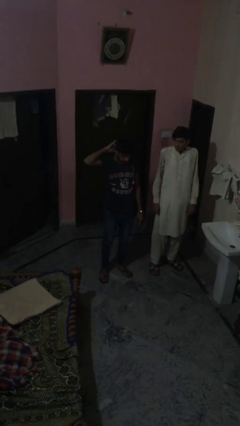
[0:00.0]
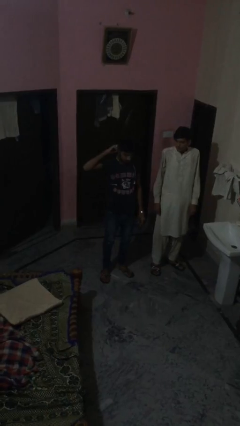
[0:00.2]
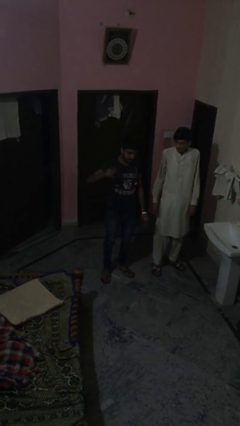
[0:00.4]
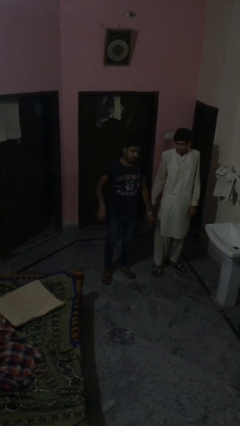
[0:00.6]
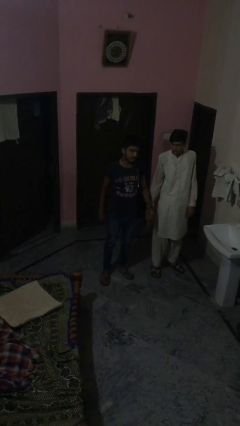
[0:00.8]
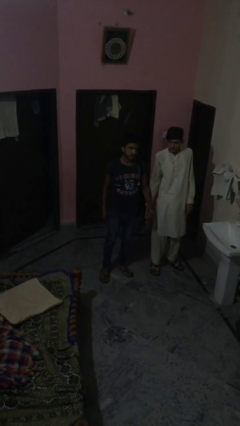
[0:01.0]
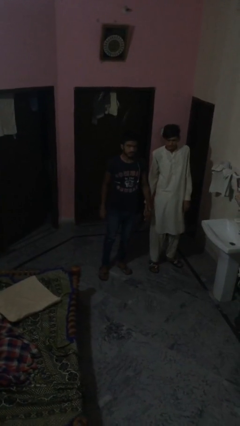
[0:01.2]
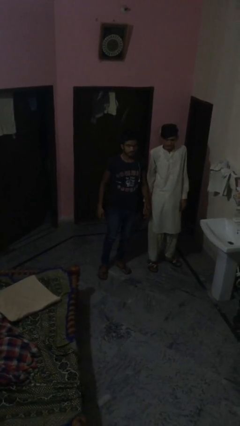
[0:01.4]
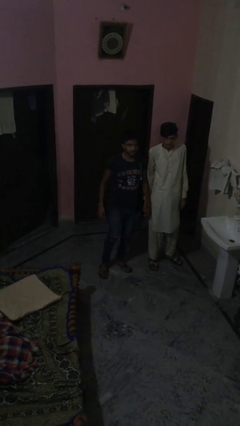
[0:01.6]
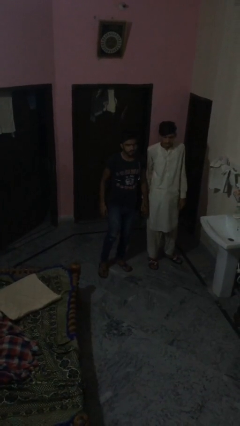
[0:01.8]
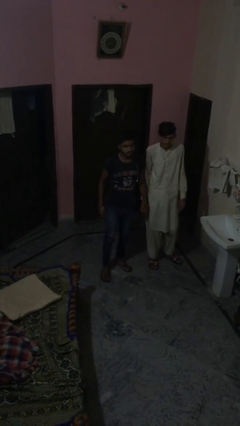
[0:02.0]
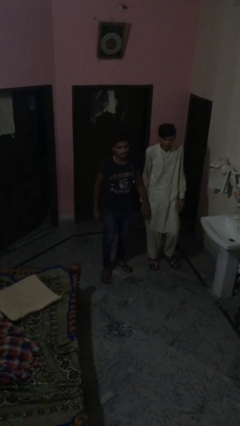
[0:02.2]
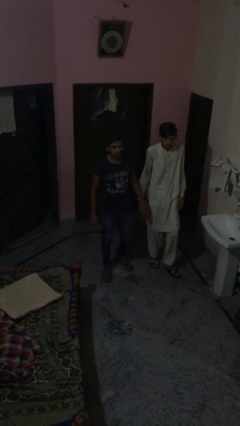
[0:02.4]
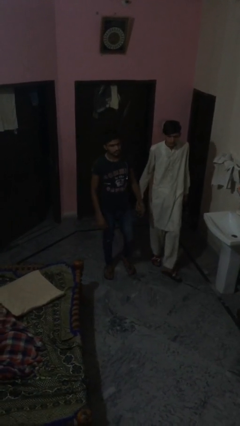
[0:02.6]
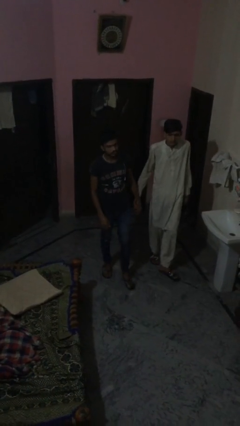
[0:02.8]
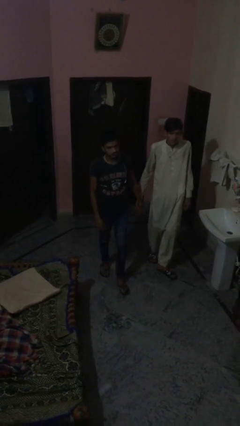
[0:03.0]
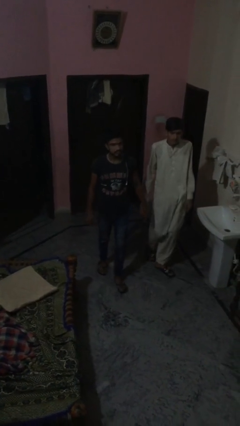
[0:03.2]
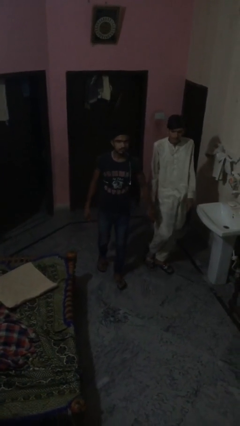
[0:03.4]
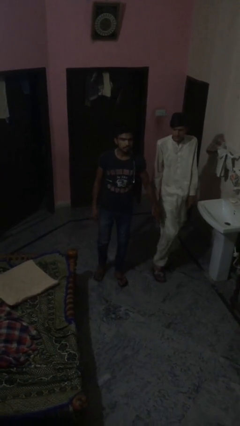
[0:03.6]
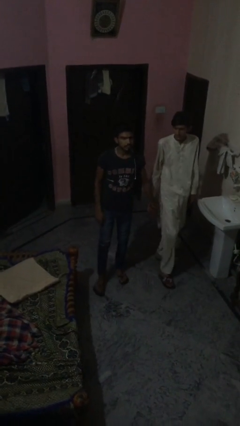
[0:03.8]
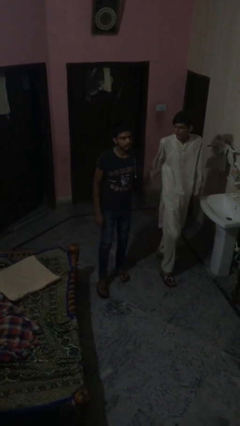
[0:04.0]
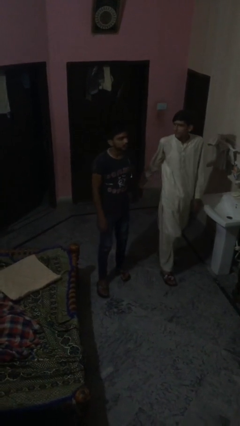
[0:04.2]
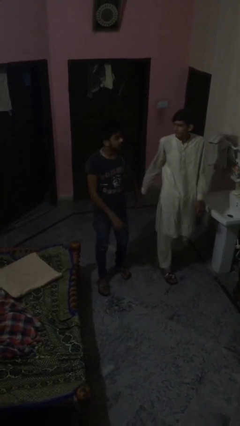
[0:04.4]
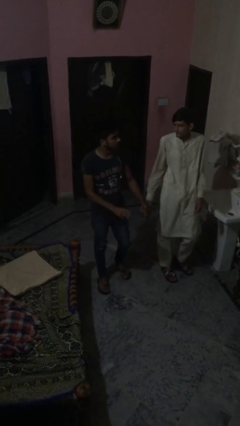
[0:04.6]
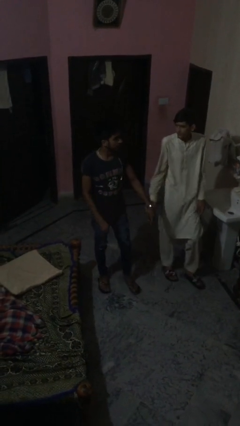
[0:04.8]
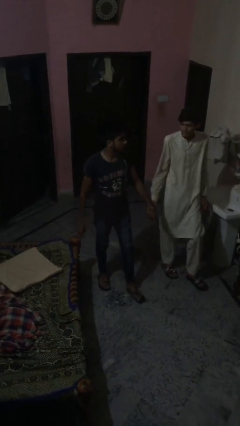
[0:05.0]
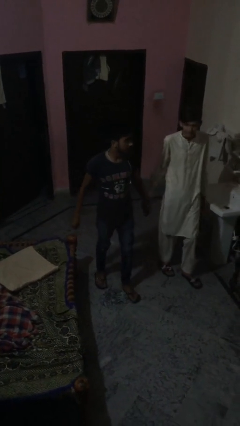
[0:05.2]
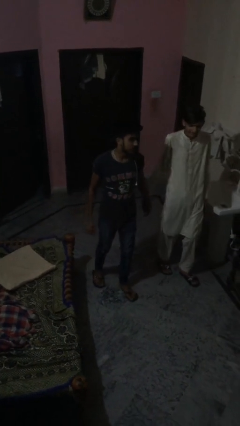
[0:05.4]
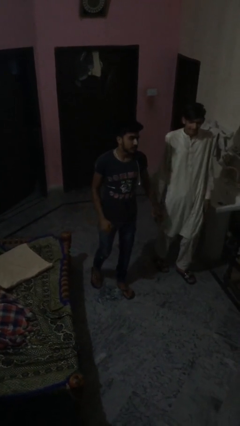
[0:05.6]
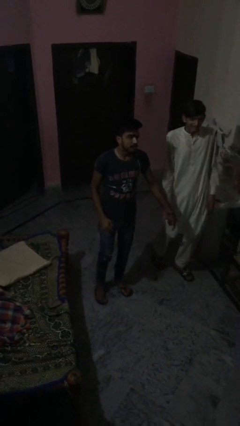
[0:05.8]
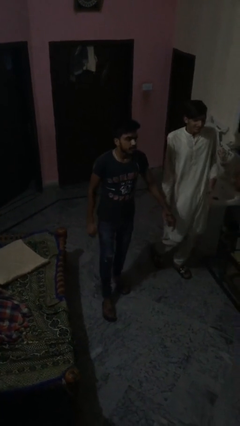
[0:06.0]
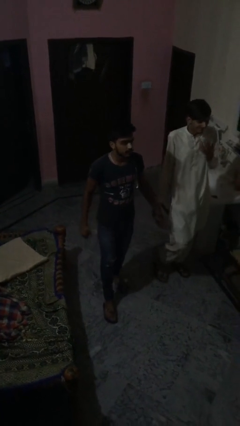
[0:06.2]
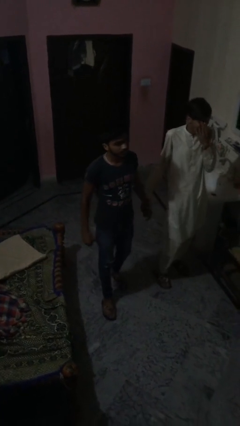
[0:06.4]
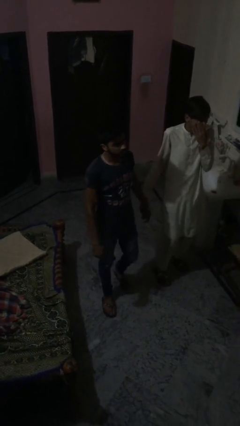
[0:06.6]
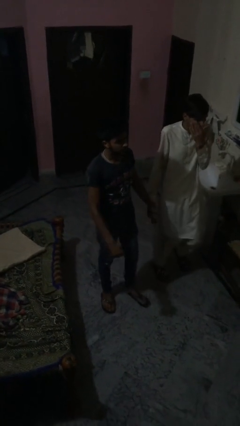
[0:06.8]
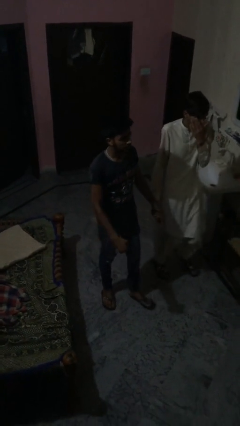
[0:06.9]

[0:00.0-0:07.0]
person holds hand

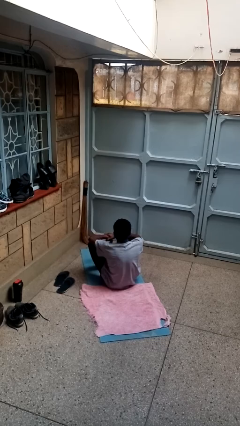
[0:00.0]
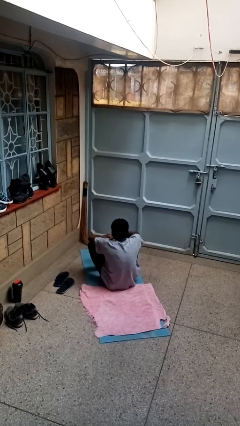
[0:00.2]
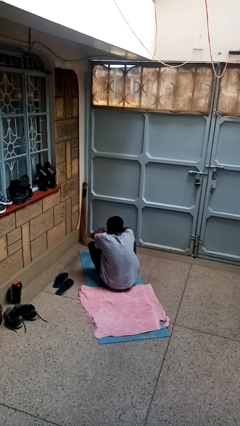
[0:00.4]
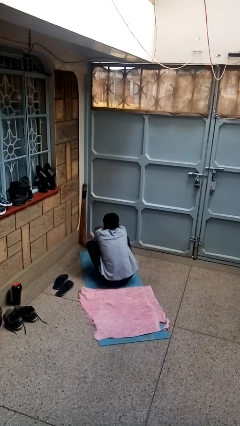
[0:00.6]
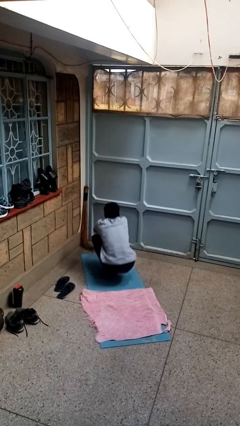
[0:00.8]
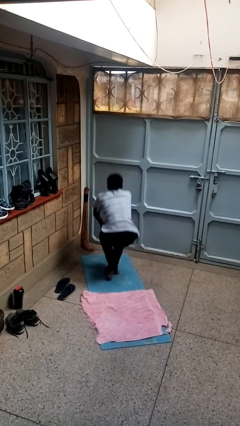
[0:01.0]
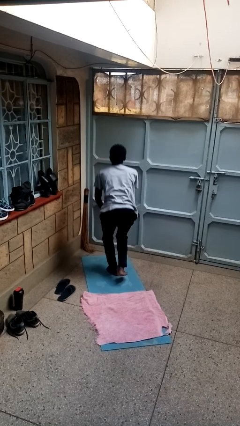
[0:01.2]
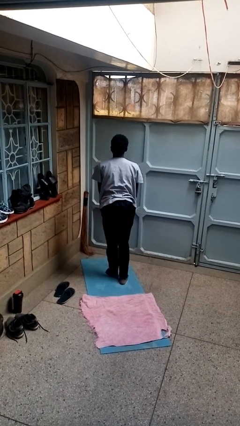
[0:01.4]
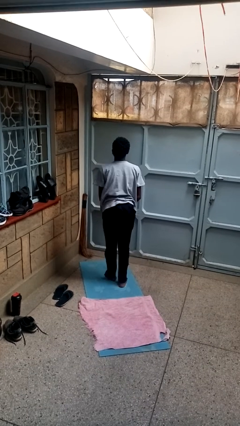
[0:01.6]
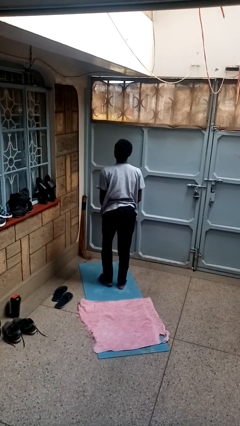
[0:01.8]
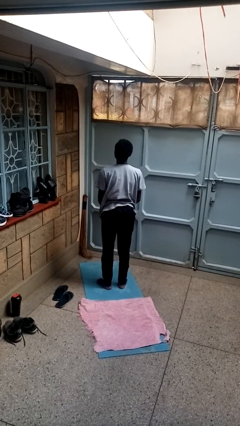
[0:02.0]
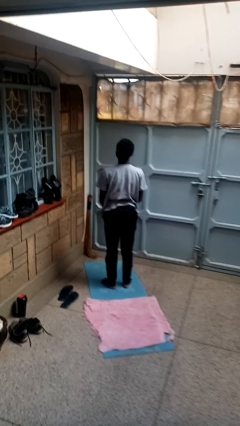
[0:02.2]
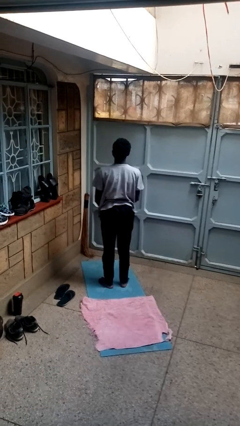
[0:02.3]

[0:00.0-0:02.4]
person stands up from floor

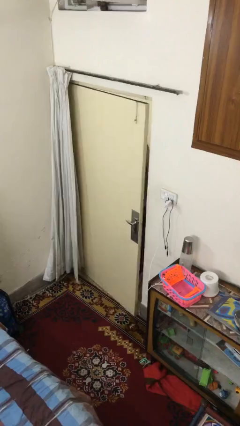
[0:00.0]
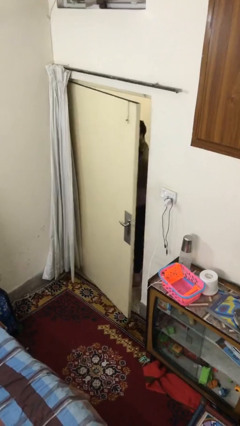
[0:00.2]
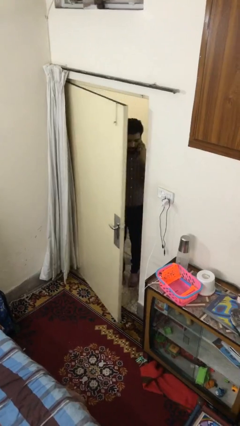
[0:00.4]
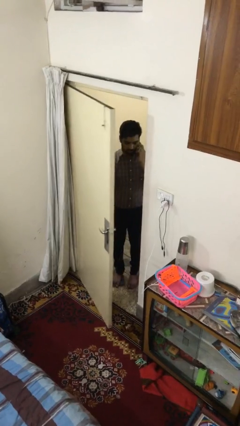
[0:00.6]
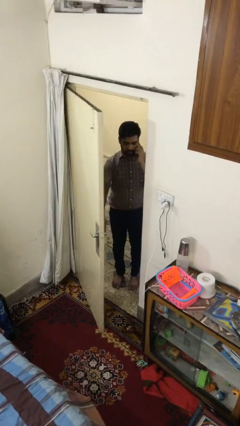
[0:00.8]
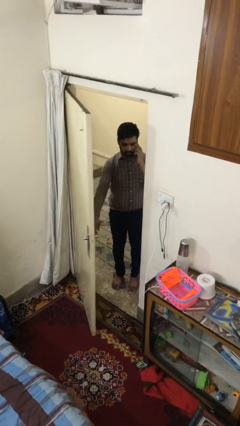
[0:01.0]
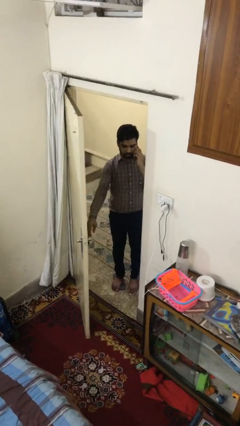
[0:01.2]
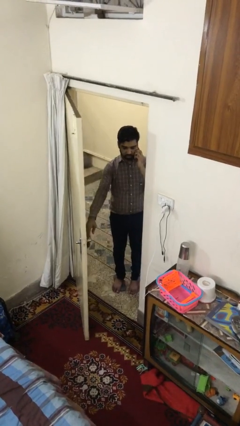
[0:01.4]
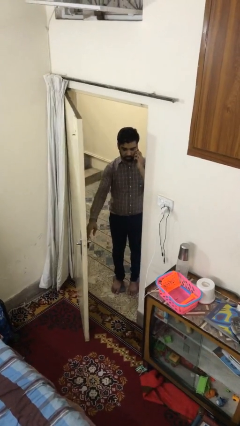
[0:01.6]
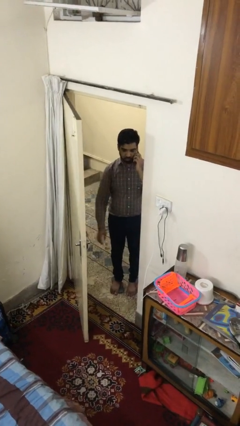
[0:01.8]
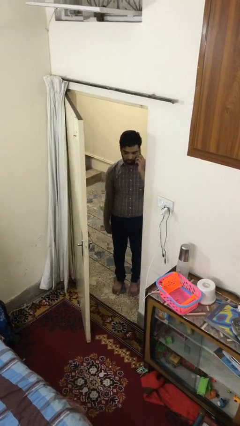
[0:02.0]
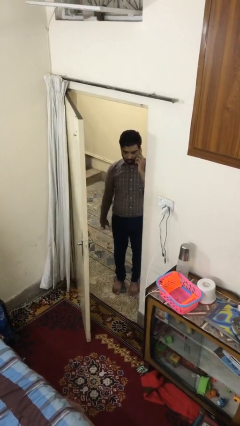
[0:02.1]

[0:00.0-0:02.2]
person opens facility door

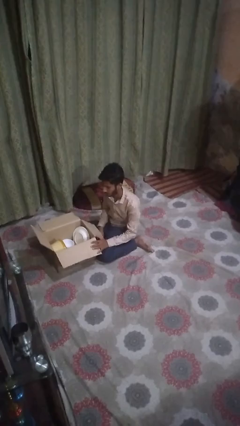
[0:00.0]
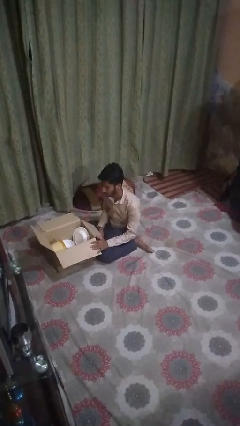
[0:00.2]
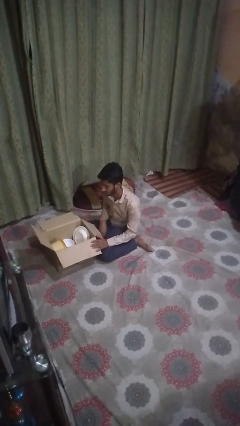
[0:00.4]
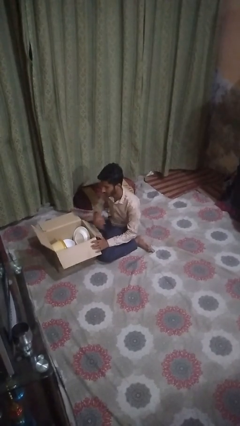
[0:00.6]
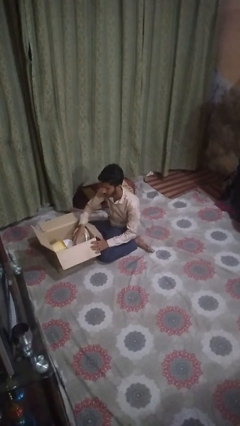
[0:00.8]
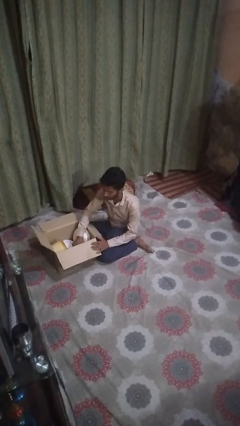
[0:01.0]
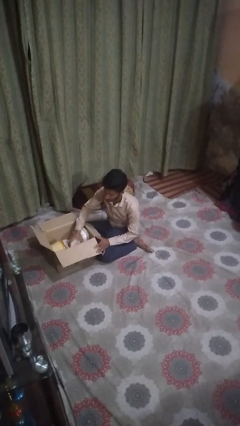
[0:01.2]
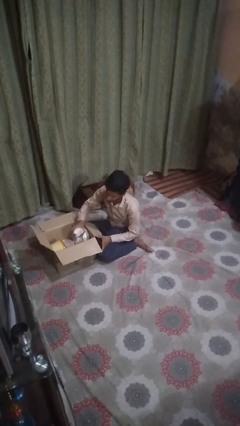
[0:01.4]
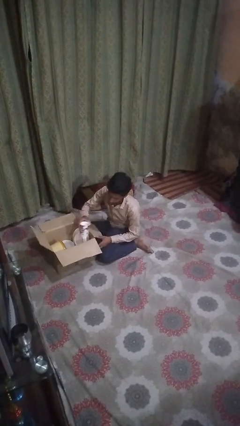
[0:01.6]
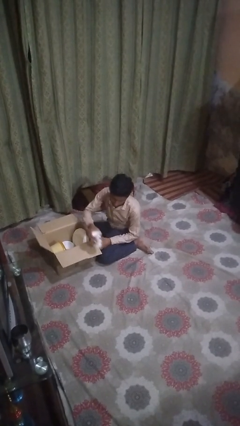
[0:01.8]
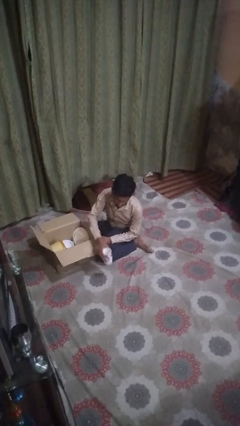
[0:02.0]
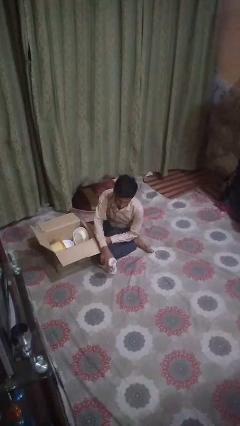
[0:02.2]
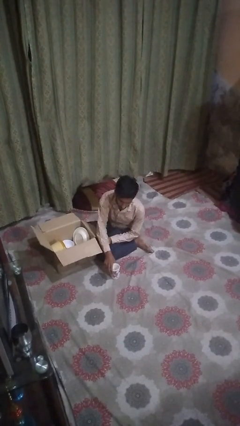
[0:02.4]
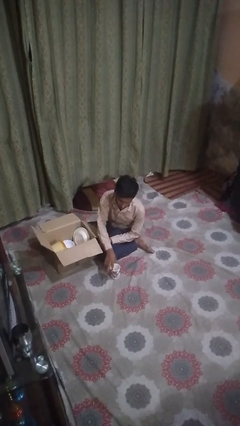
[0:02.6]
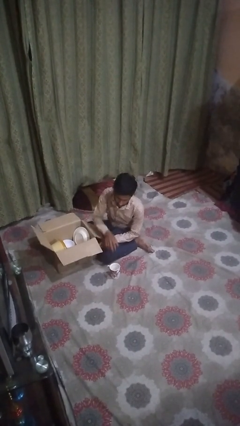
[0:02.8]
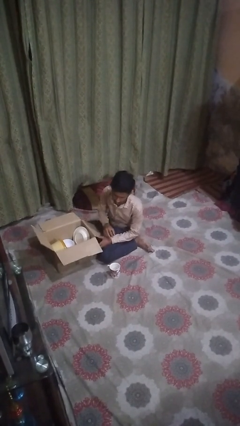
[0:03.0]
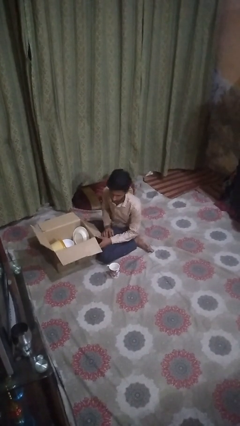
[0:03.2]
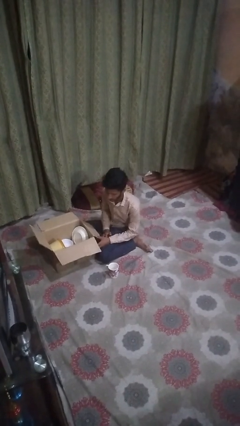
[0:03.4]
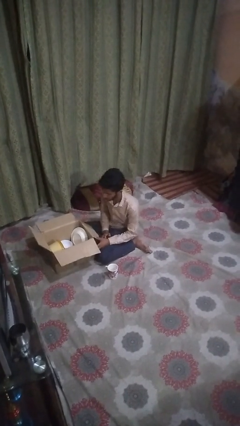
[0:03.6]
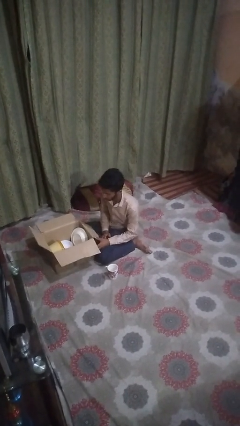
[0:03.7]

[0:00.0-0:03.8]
person takes object from box

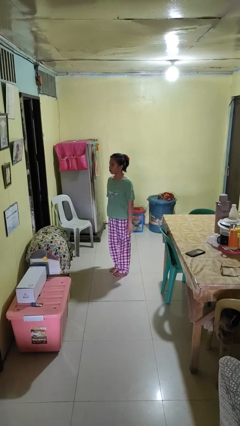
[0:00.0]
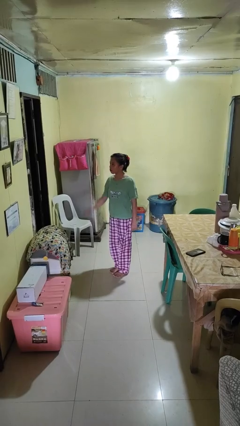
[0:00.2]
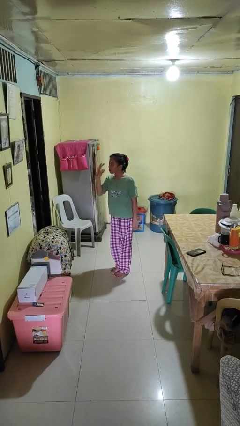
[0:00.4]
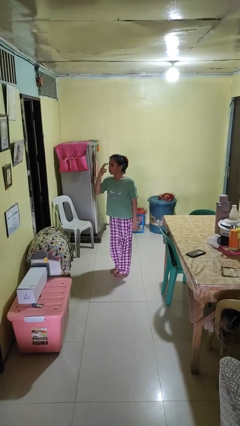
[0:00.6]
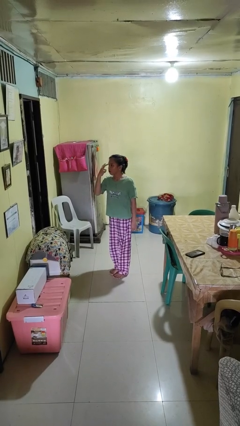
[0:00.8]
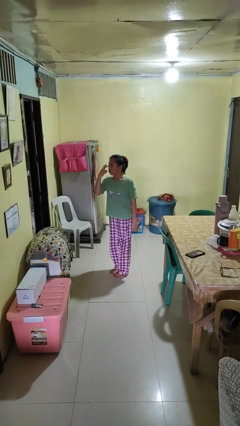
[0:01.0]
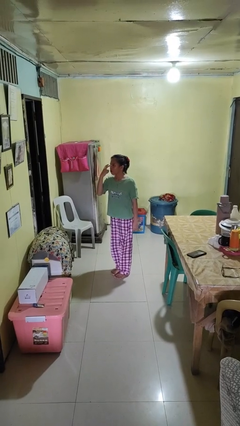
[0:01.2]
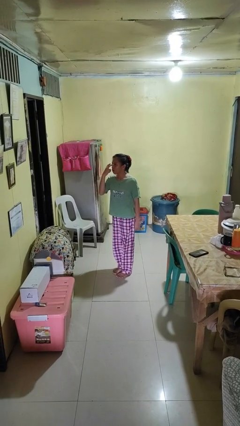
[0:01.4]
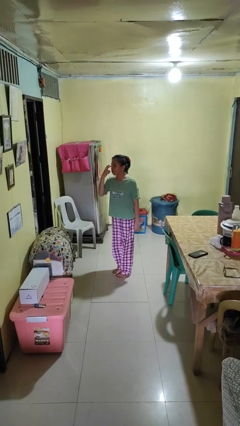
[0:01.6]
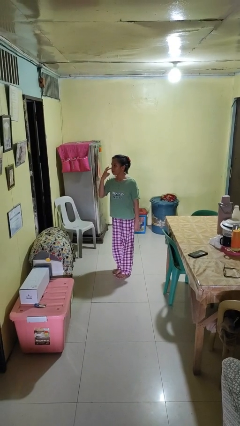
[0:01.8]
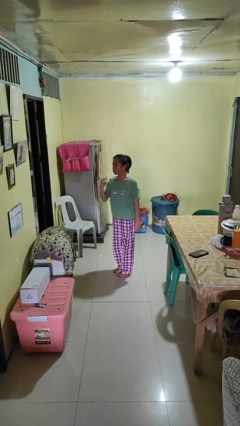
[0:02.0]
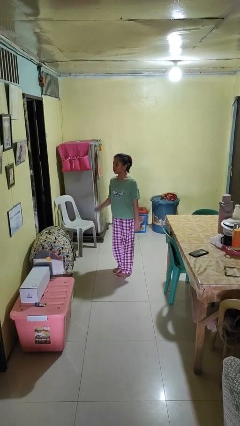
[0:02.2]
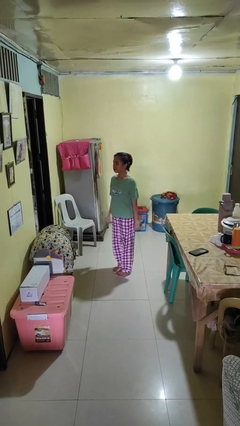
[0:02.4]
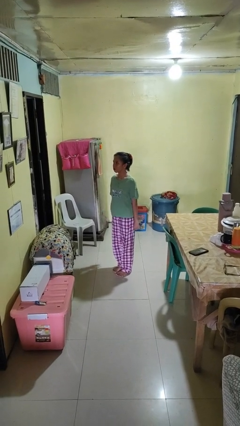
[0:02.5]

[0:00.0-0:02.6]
person gestures watch closely
